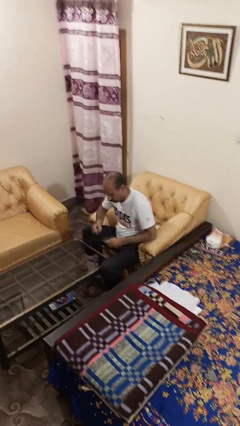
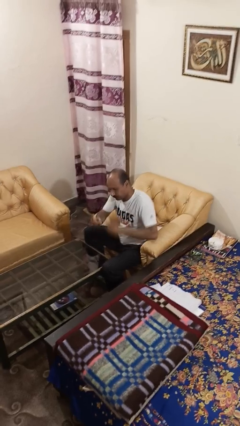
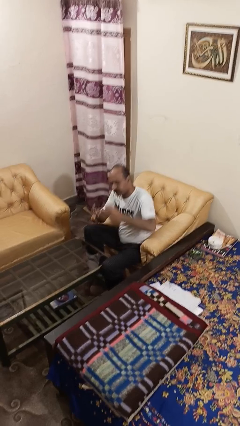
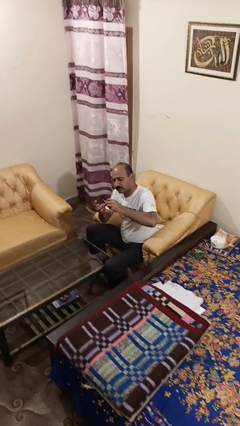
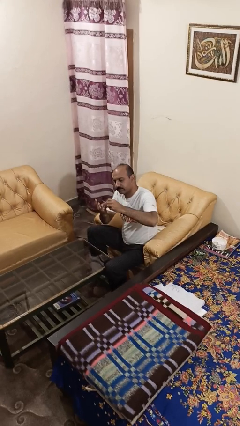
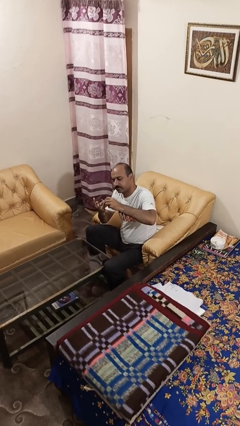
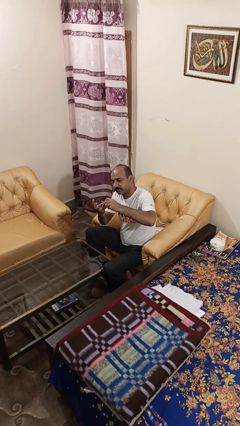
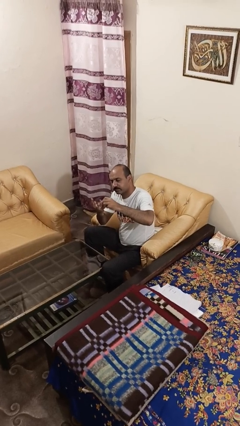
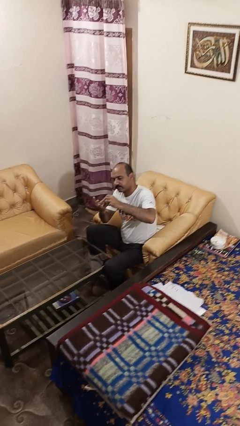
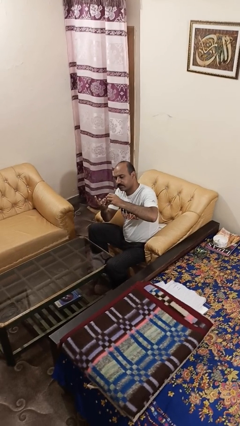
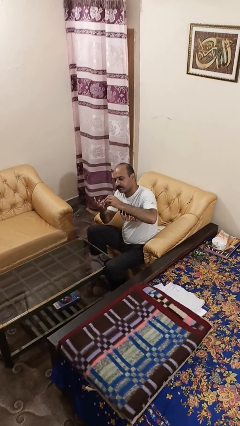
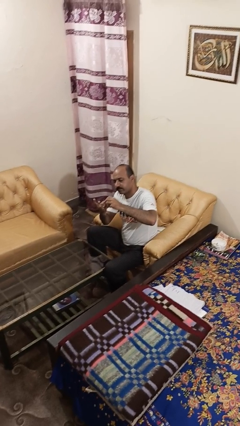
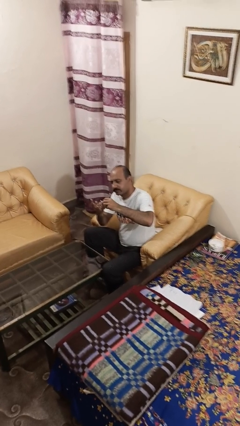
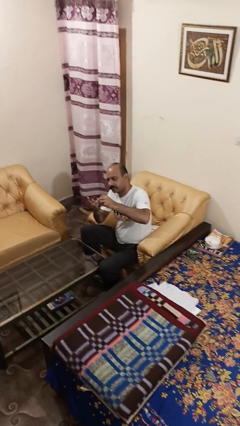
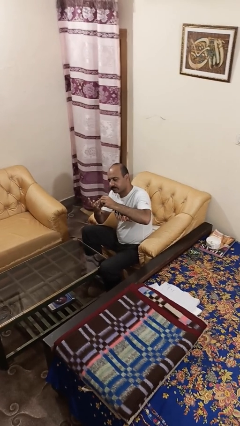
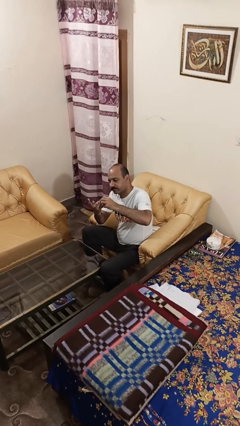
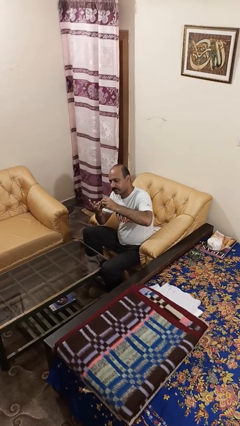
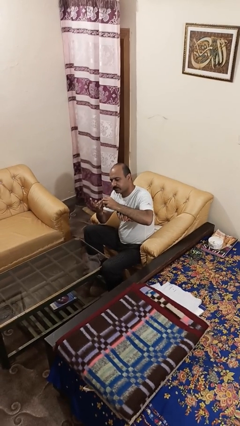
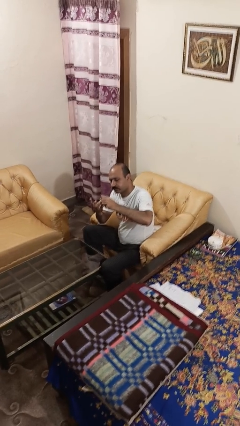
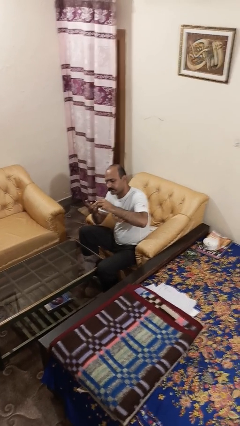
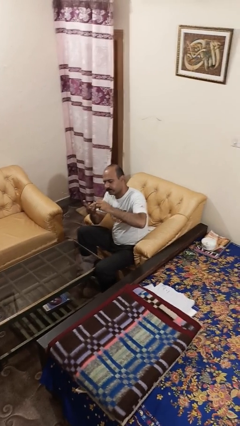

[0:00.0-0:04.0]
person files fingernails

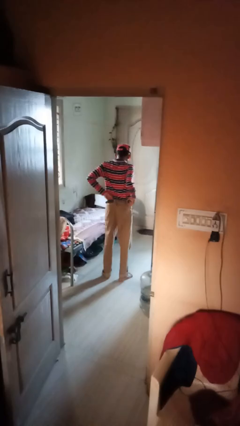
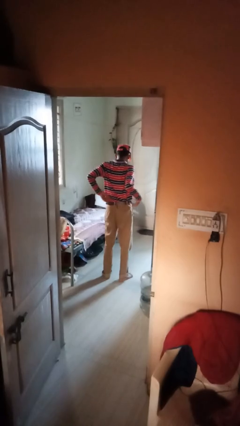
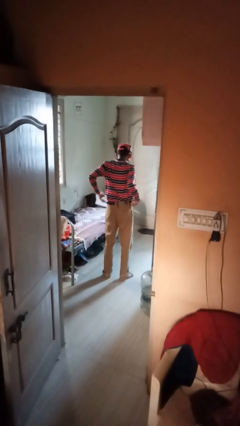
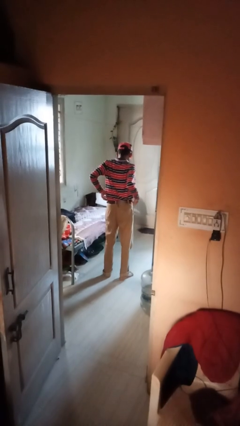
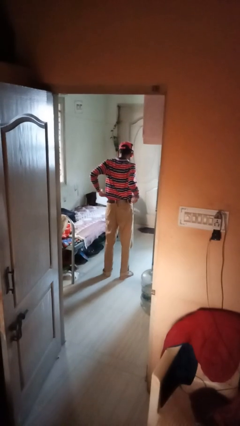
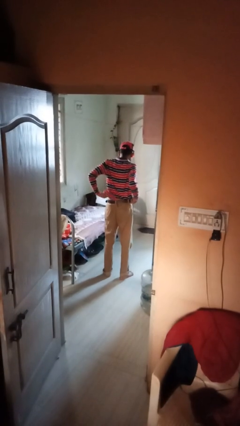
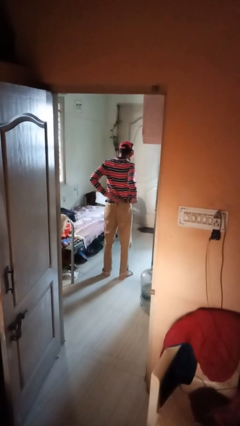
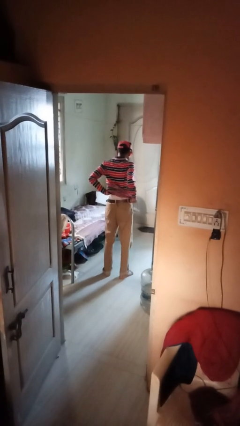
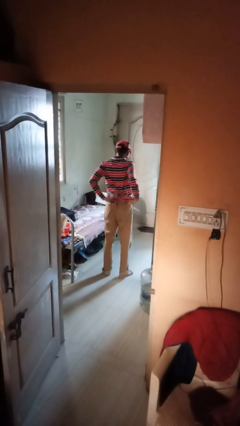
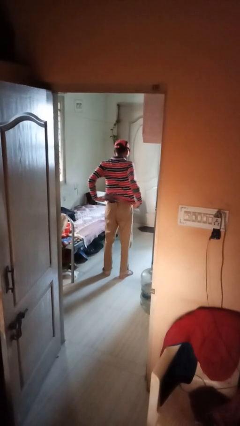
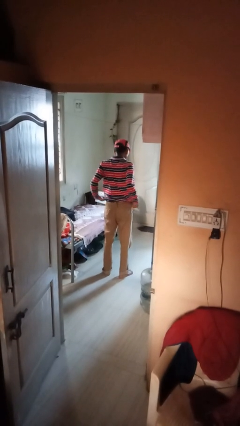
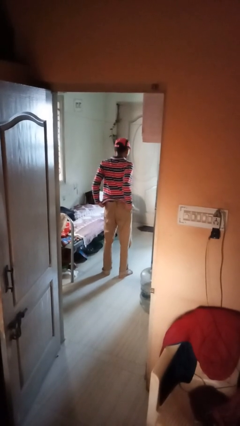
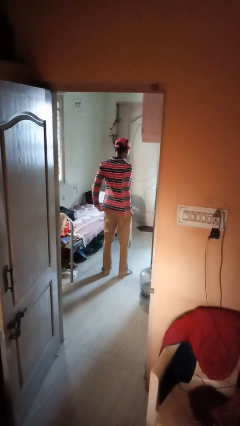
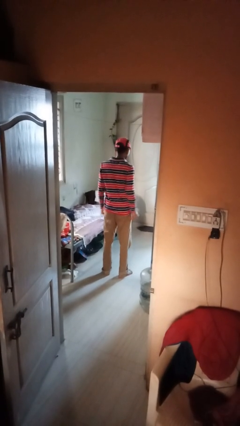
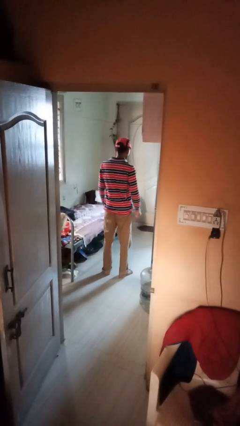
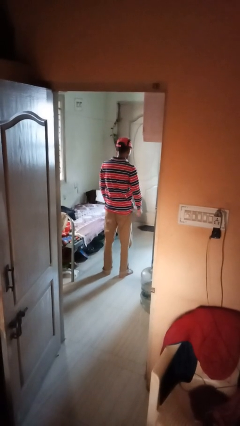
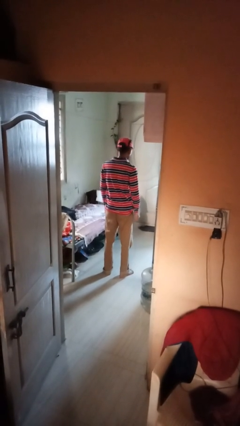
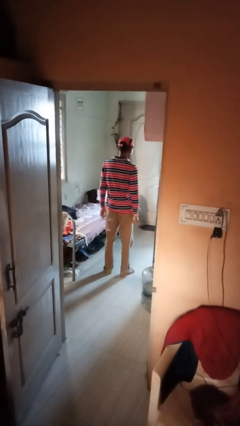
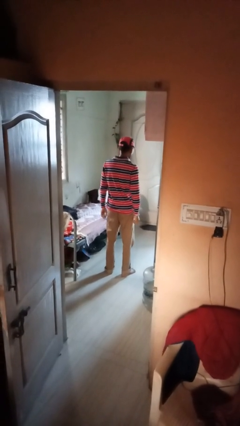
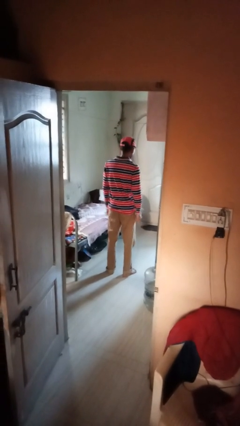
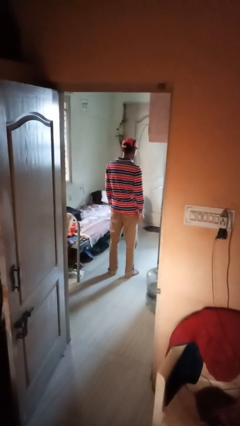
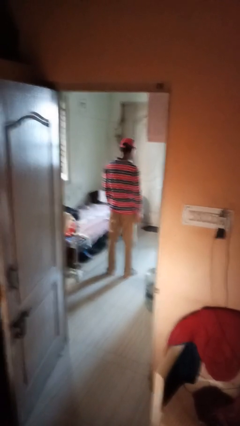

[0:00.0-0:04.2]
person untucks shirt

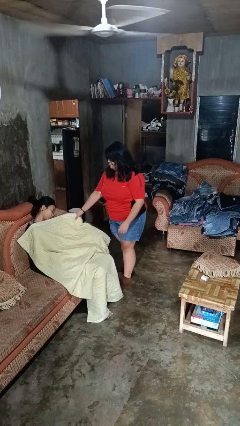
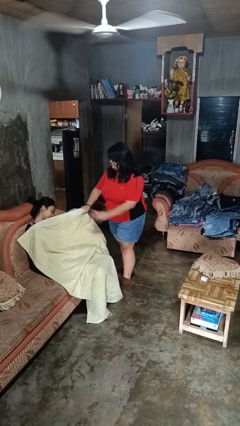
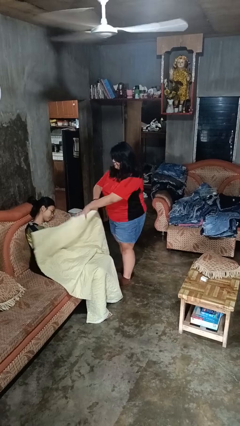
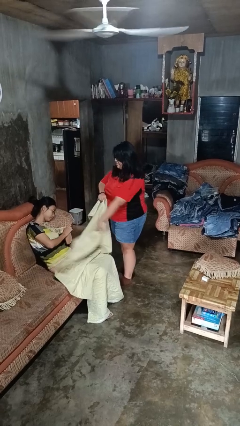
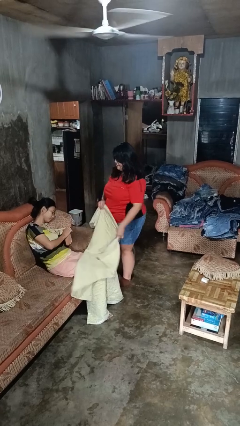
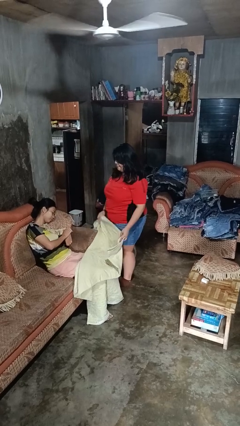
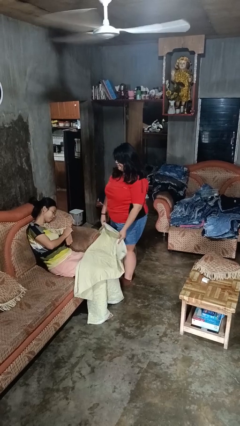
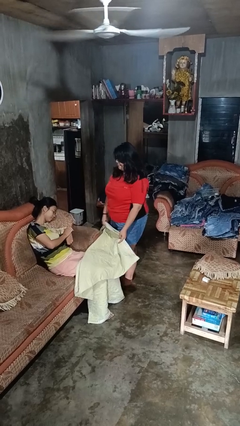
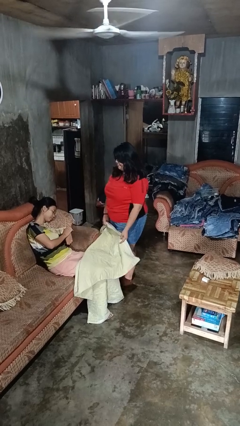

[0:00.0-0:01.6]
person uncovers friend with blanket

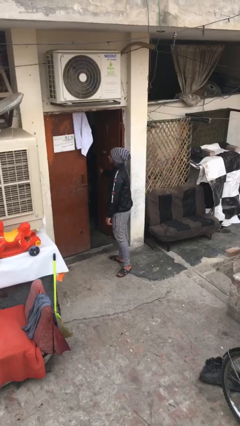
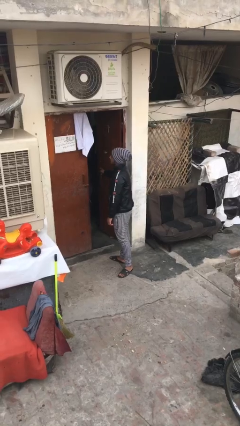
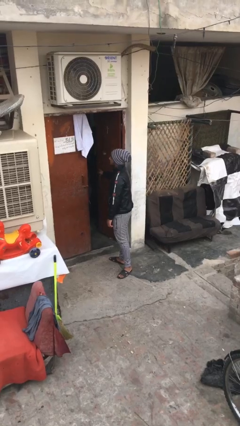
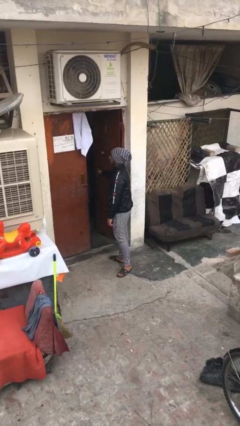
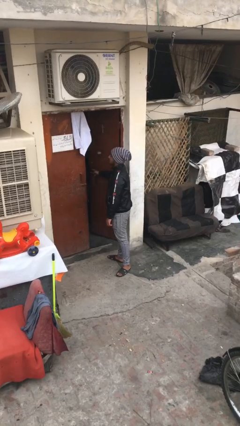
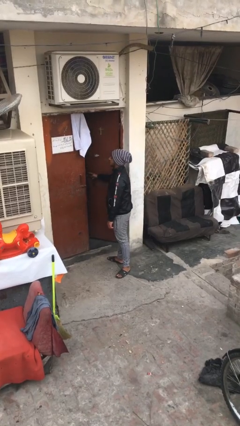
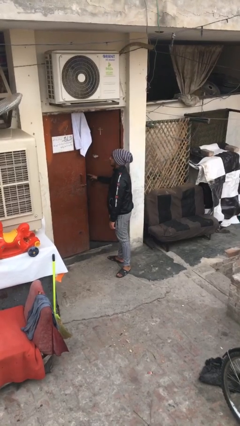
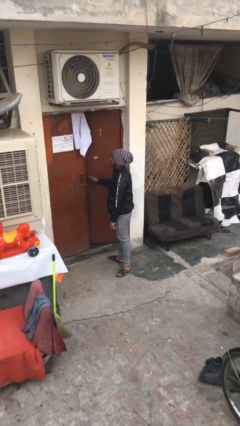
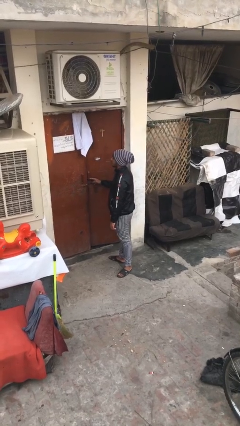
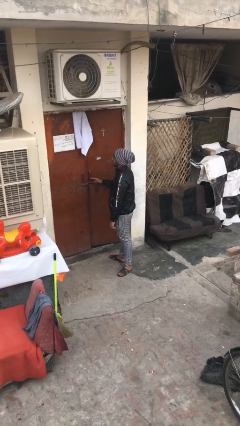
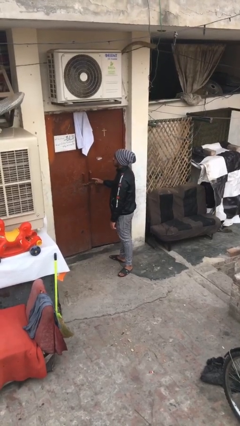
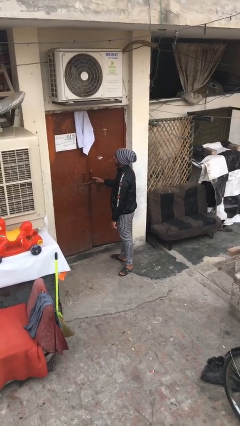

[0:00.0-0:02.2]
person closes facility door

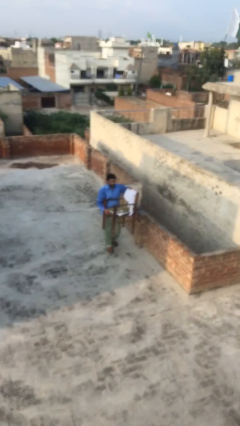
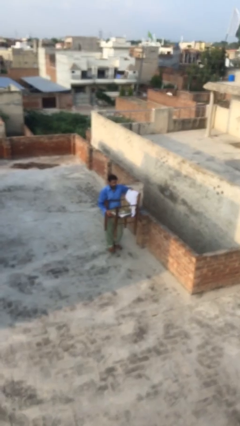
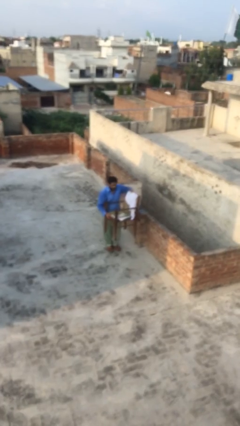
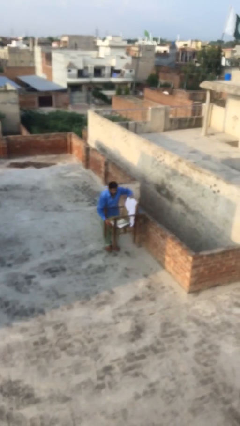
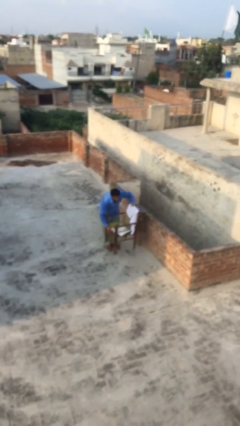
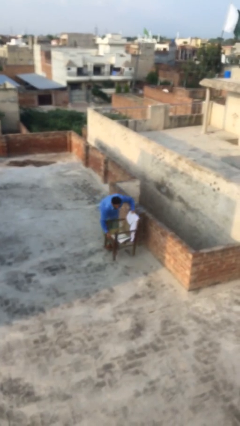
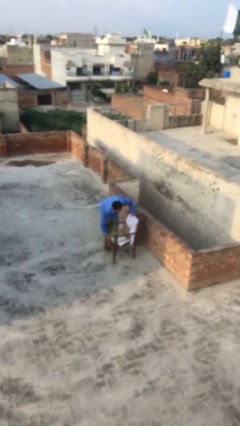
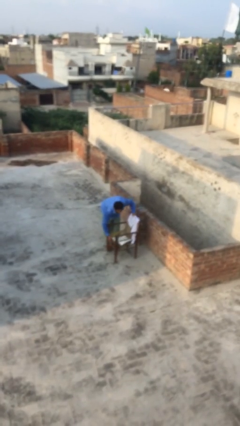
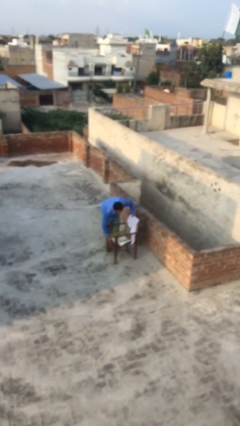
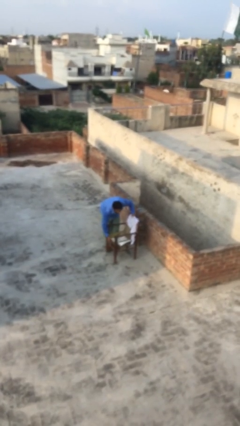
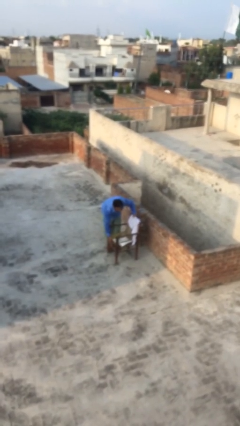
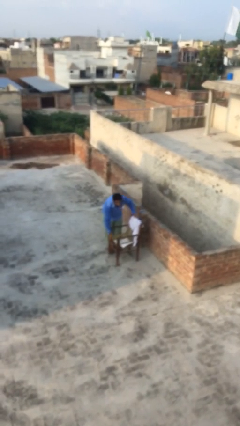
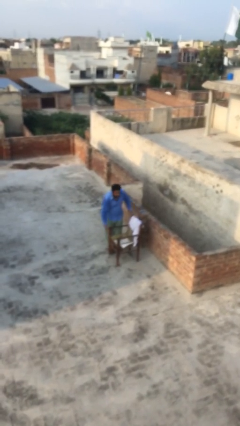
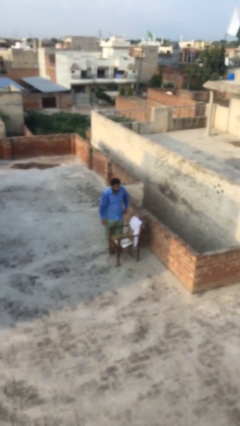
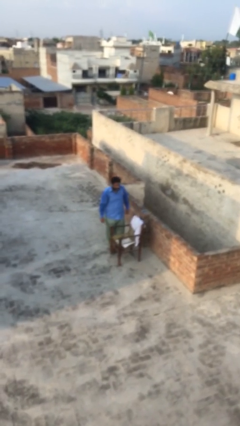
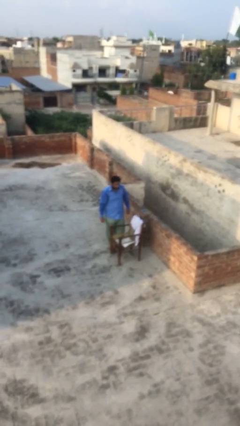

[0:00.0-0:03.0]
person puts down object on floor

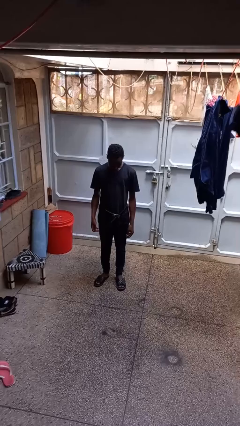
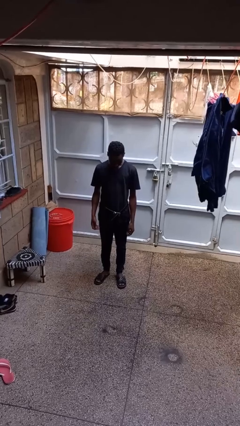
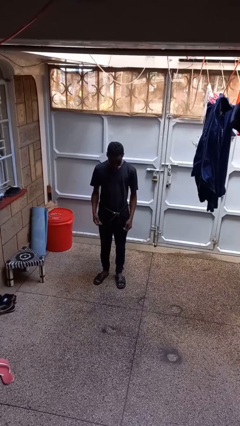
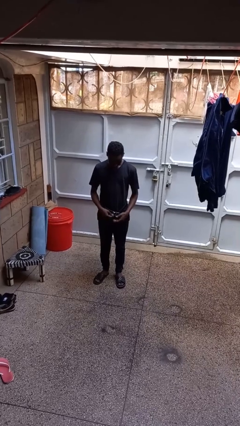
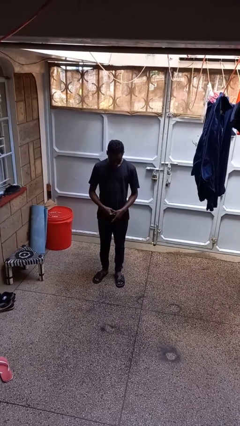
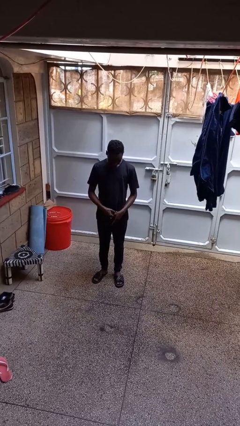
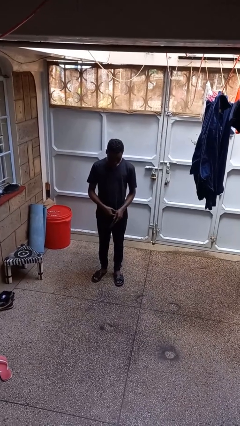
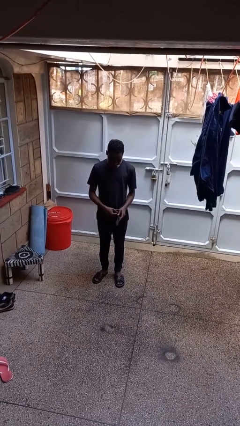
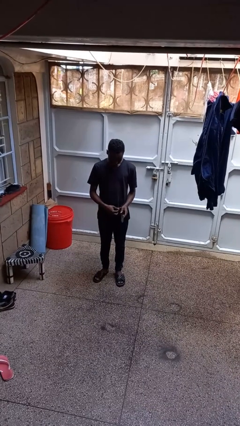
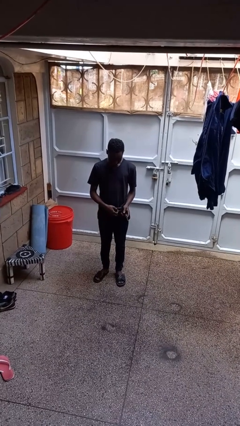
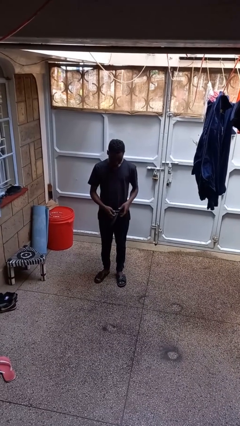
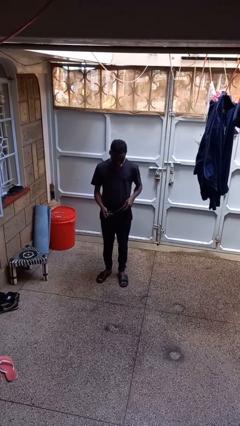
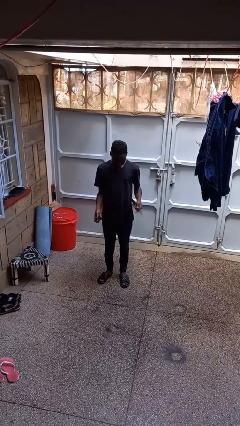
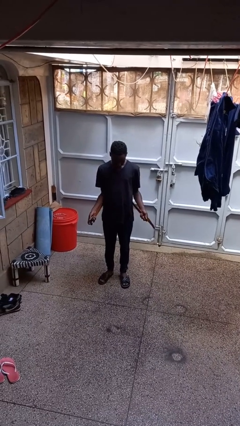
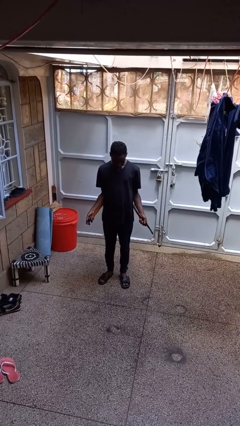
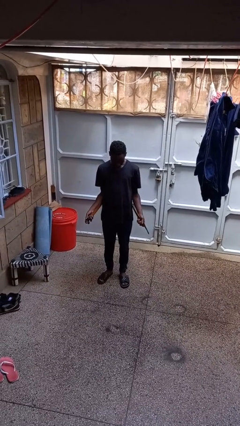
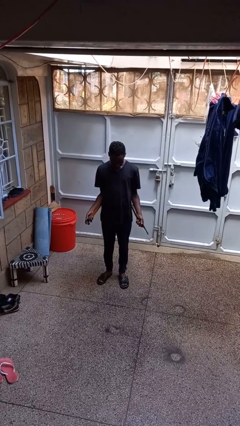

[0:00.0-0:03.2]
person takes off belt
